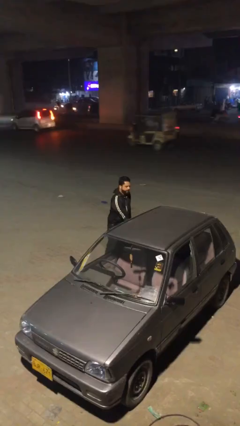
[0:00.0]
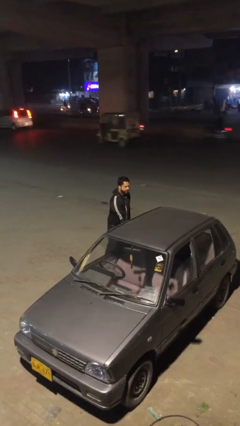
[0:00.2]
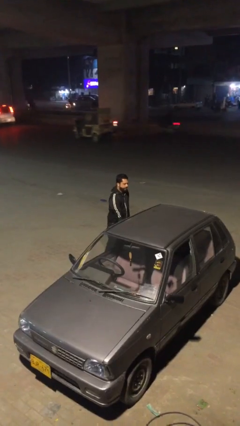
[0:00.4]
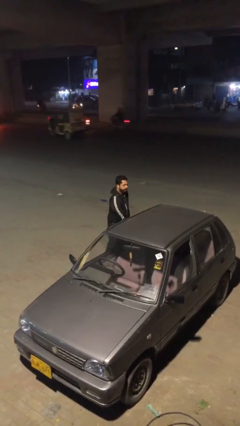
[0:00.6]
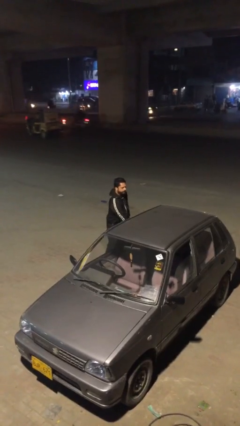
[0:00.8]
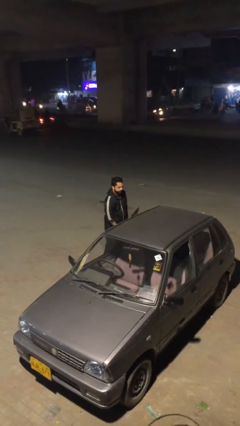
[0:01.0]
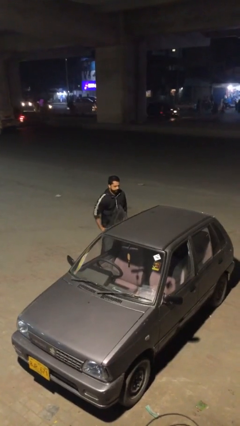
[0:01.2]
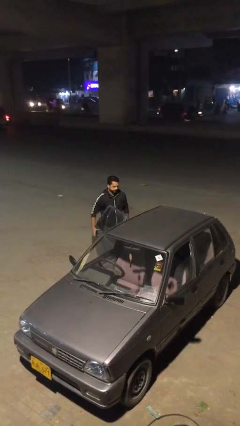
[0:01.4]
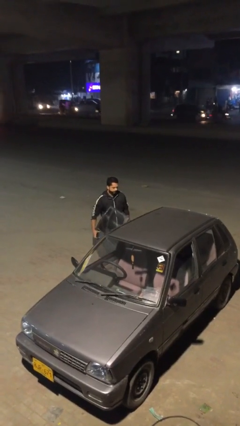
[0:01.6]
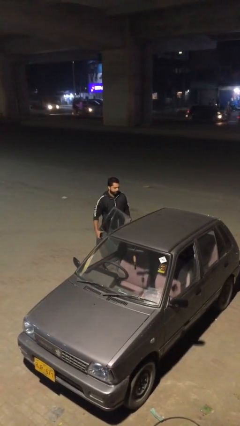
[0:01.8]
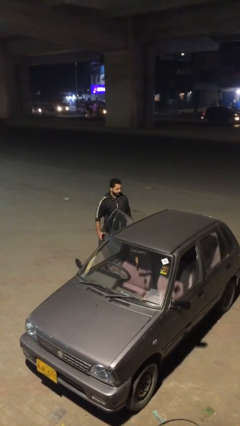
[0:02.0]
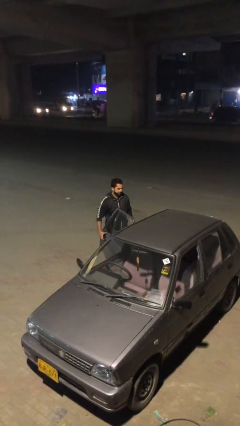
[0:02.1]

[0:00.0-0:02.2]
person opens car door

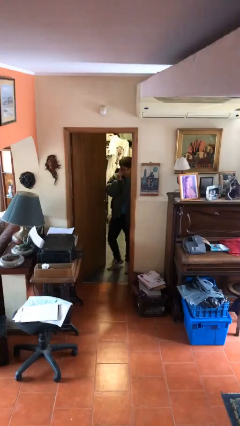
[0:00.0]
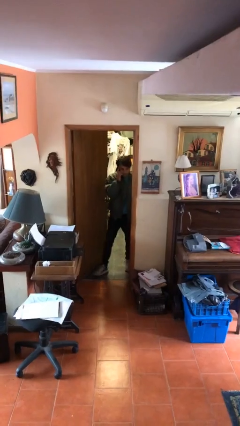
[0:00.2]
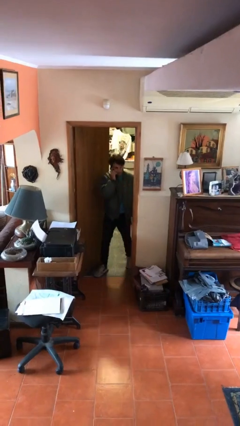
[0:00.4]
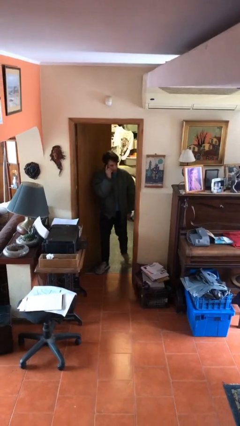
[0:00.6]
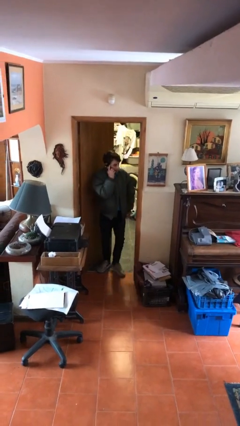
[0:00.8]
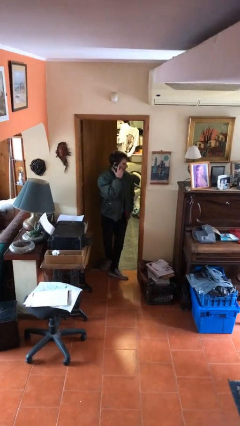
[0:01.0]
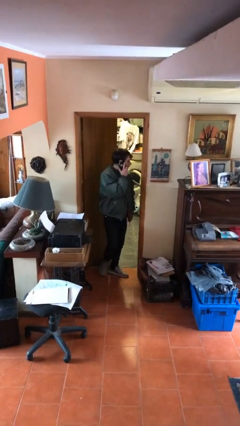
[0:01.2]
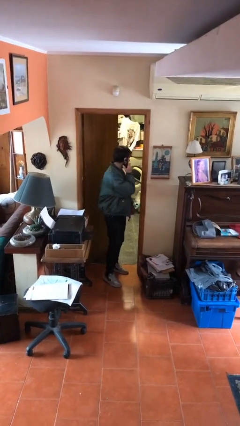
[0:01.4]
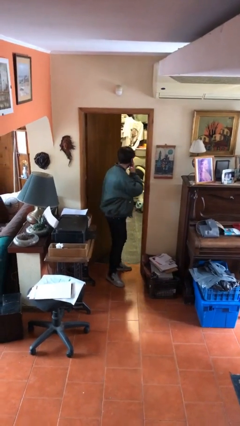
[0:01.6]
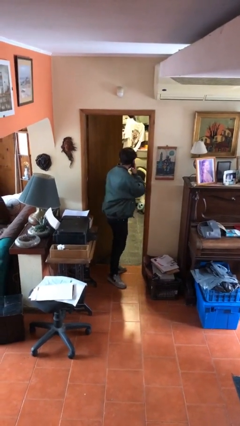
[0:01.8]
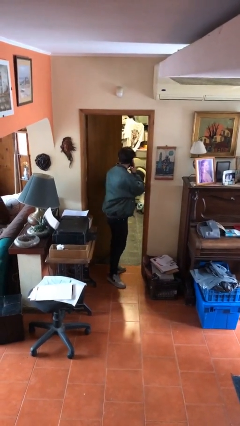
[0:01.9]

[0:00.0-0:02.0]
person enters scene through structure

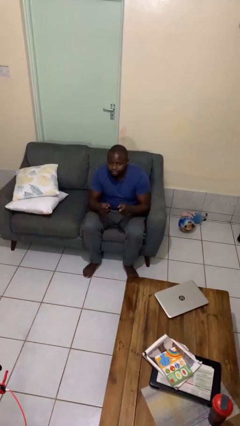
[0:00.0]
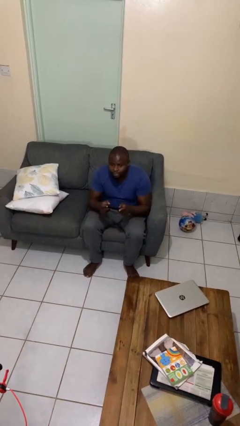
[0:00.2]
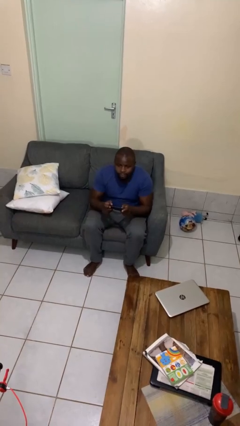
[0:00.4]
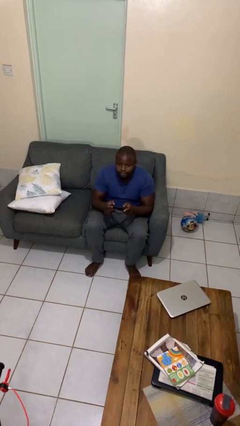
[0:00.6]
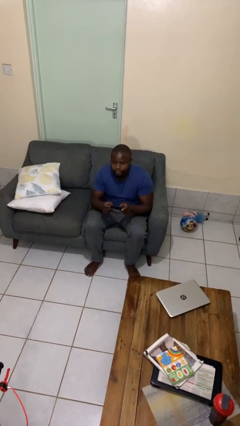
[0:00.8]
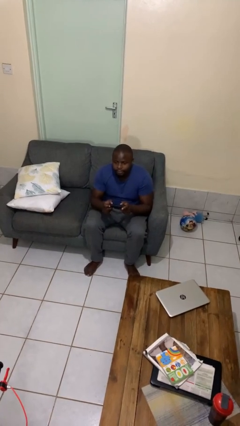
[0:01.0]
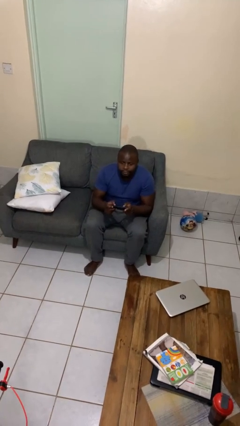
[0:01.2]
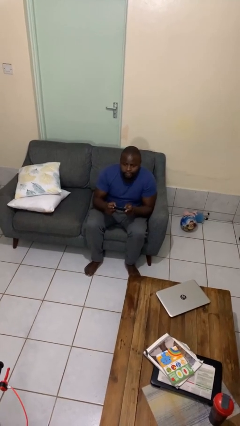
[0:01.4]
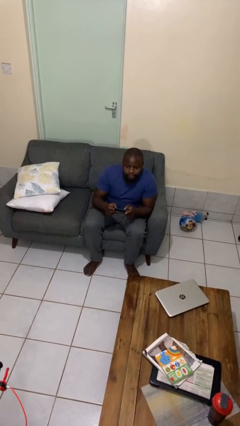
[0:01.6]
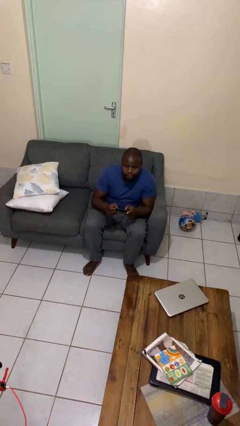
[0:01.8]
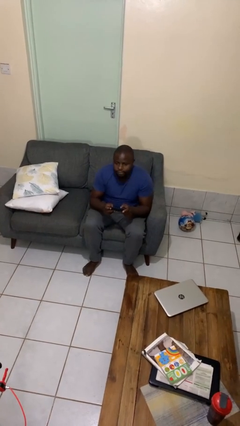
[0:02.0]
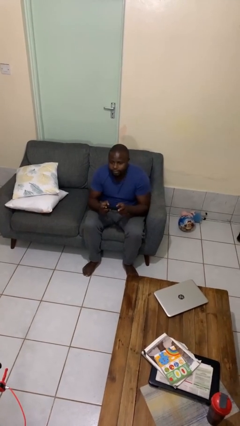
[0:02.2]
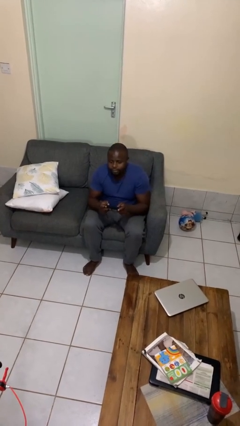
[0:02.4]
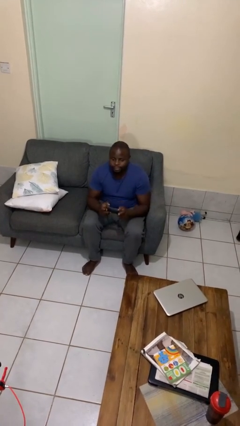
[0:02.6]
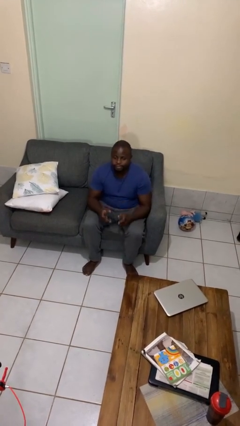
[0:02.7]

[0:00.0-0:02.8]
person interacts with handheld game

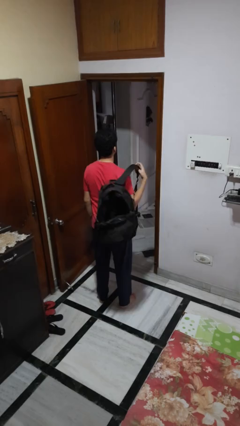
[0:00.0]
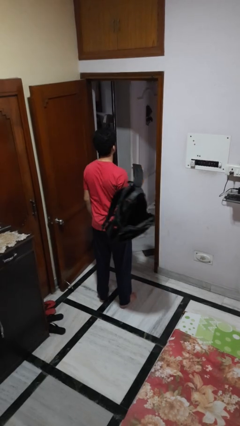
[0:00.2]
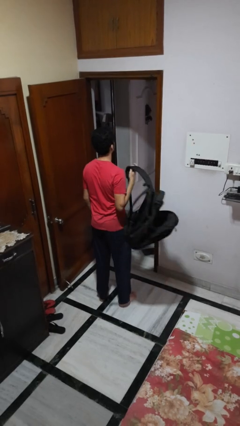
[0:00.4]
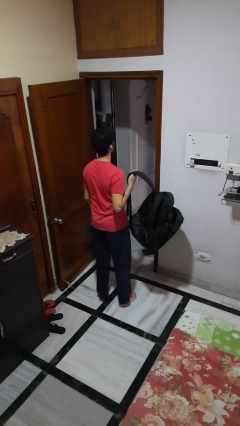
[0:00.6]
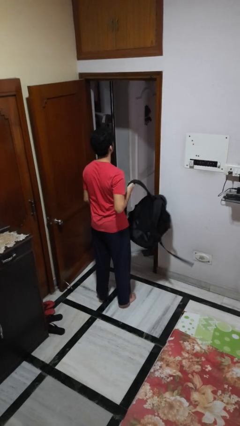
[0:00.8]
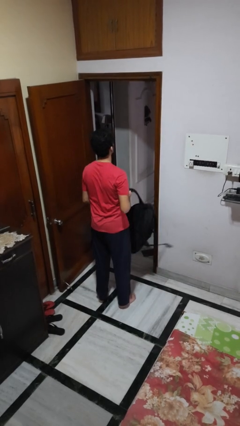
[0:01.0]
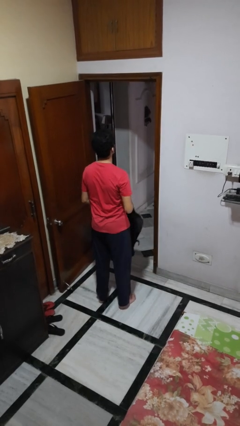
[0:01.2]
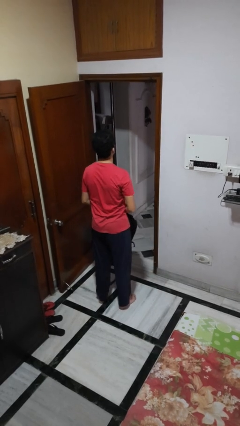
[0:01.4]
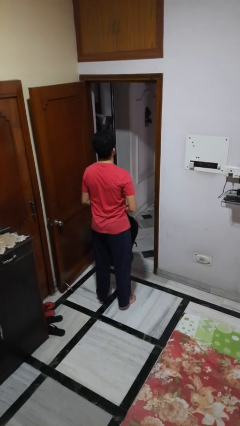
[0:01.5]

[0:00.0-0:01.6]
person takes off backpack

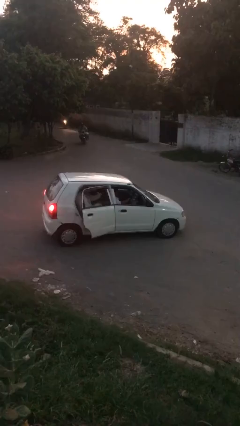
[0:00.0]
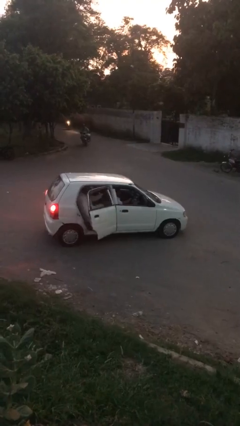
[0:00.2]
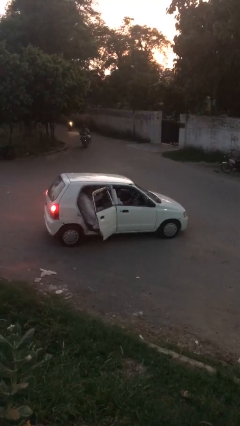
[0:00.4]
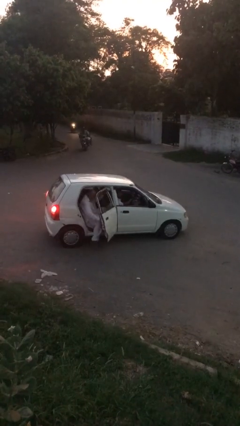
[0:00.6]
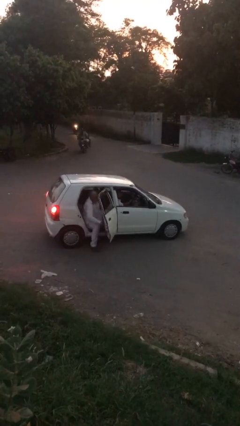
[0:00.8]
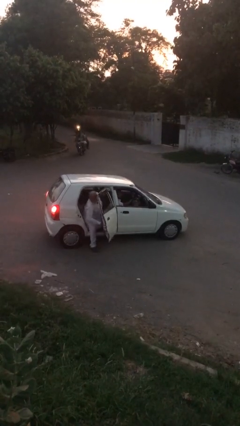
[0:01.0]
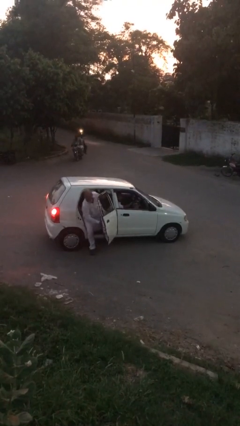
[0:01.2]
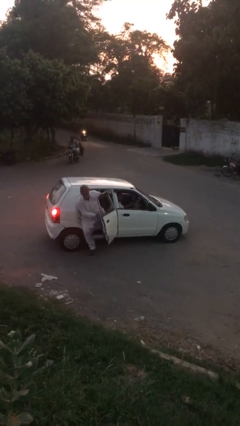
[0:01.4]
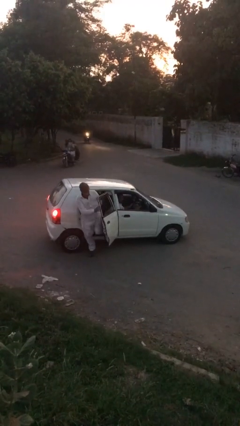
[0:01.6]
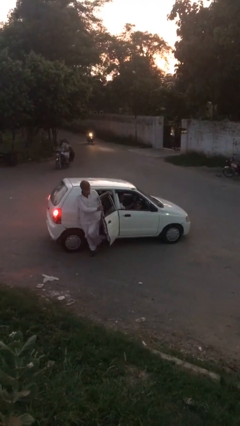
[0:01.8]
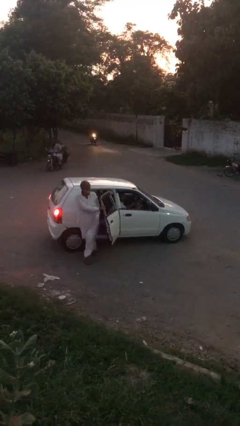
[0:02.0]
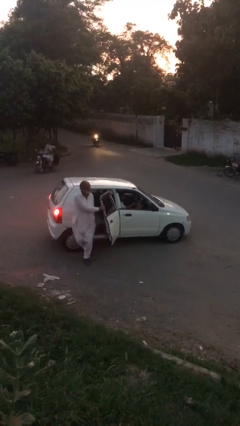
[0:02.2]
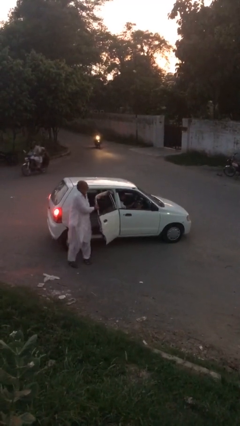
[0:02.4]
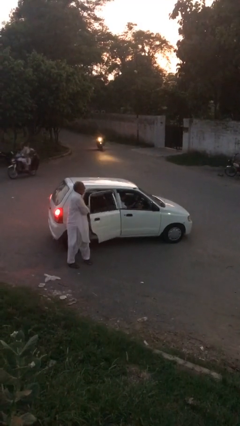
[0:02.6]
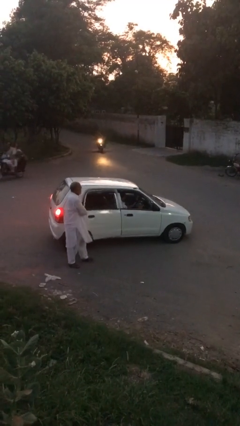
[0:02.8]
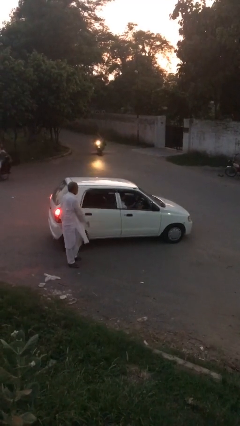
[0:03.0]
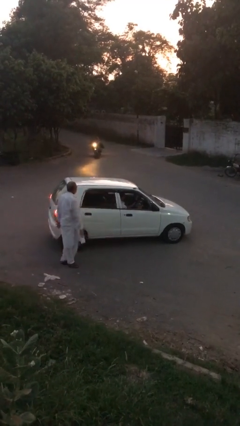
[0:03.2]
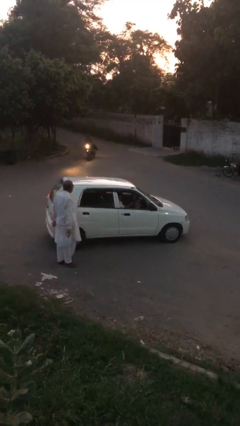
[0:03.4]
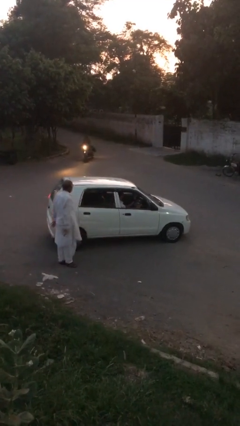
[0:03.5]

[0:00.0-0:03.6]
car drops off person

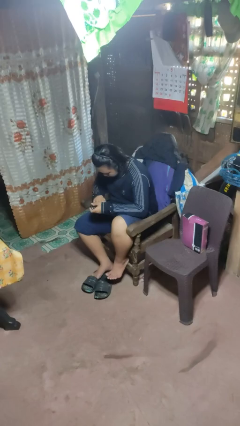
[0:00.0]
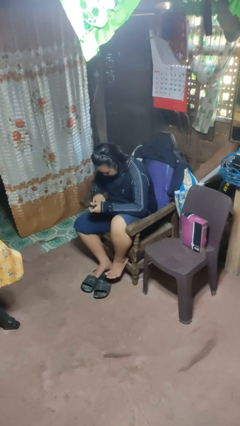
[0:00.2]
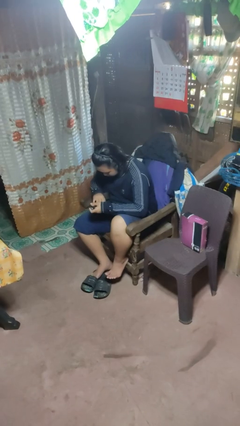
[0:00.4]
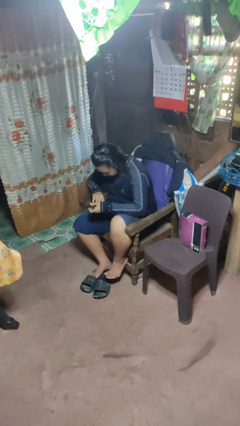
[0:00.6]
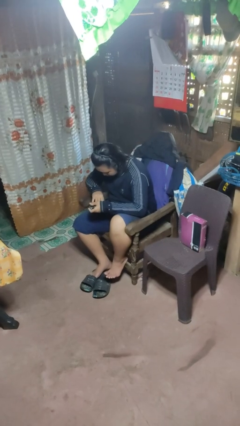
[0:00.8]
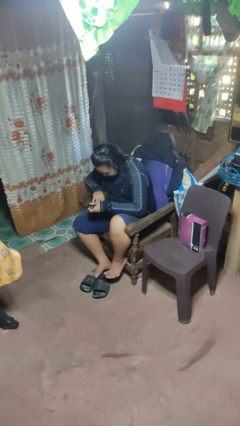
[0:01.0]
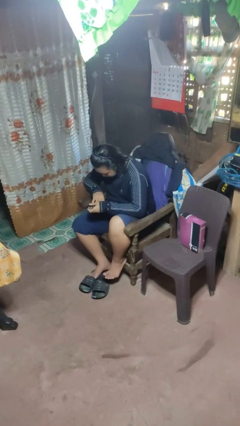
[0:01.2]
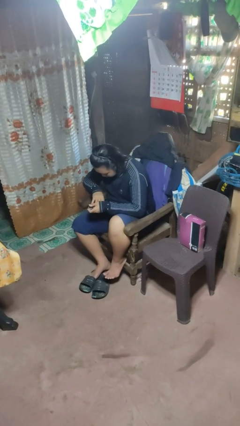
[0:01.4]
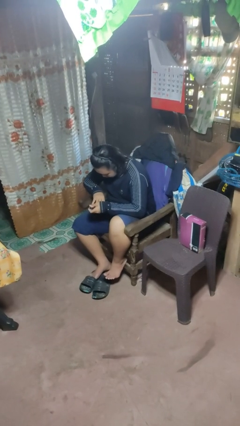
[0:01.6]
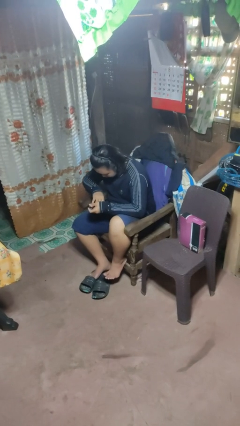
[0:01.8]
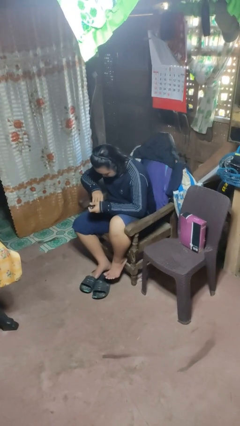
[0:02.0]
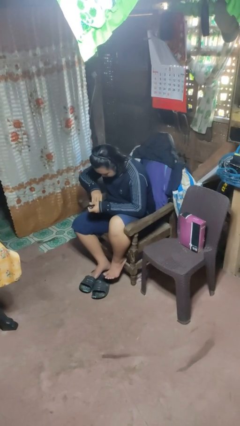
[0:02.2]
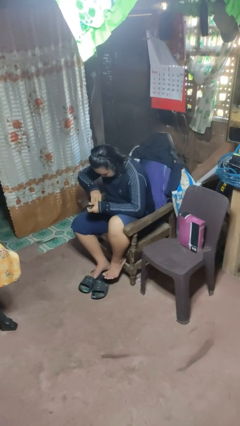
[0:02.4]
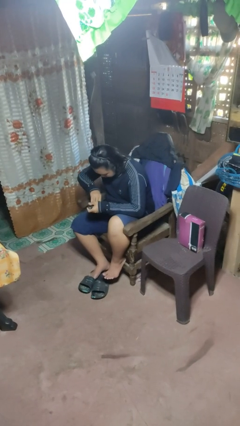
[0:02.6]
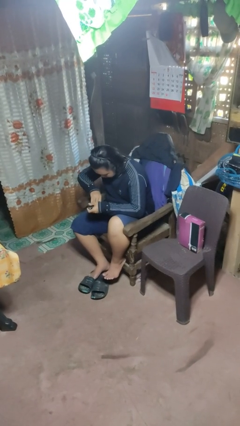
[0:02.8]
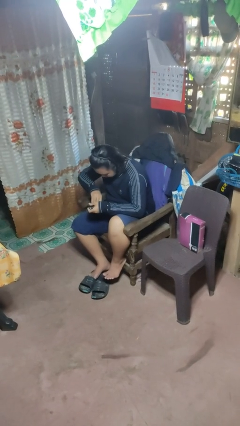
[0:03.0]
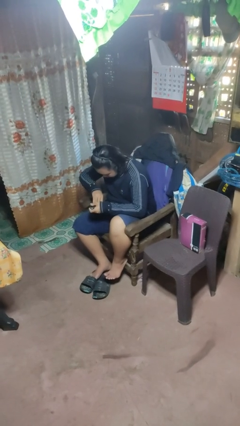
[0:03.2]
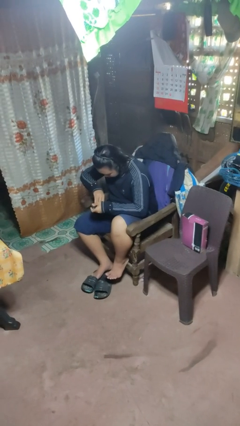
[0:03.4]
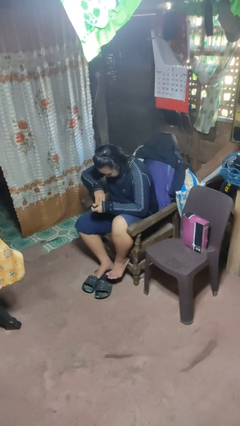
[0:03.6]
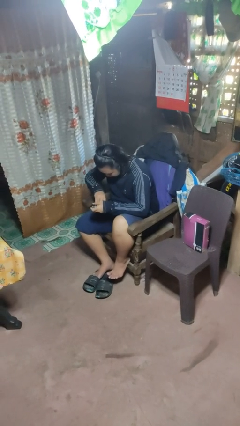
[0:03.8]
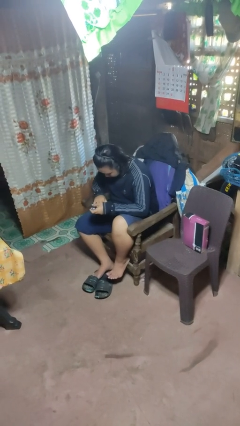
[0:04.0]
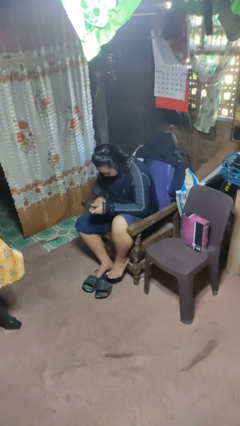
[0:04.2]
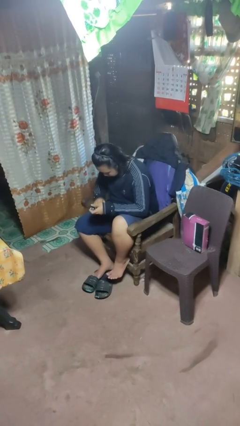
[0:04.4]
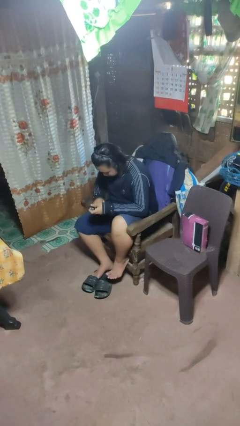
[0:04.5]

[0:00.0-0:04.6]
person clips fingernails

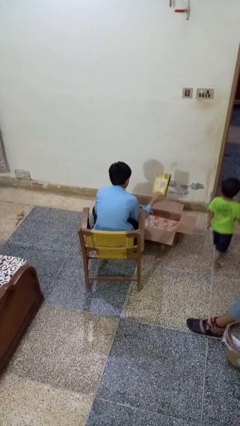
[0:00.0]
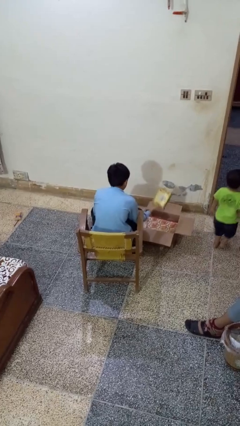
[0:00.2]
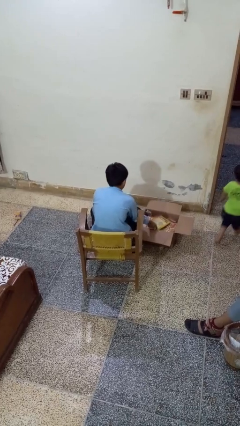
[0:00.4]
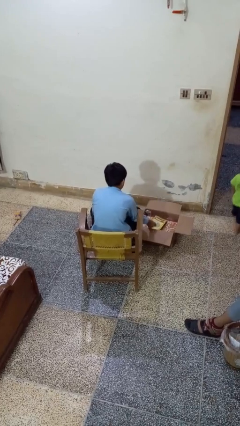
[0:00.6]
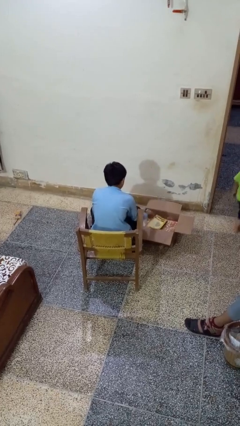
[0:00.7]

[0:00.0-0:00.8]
person puts object into box
